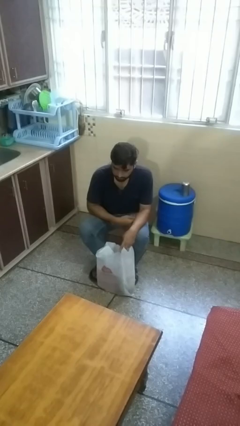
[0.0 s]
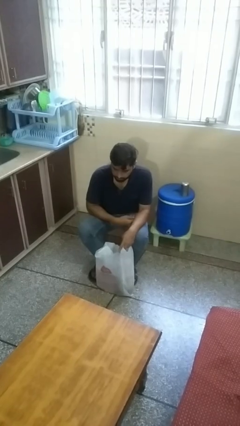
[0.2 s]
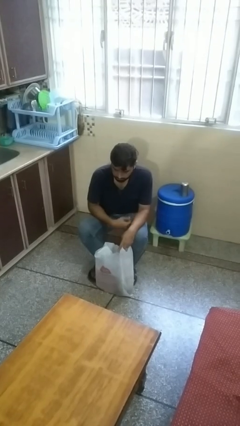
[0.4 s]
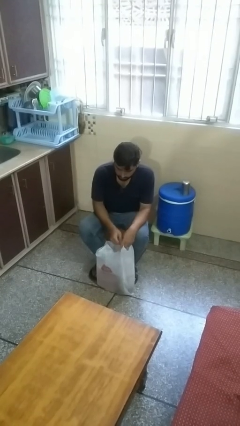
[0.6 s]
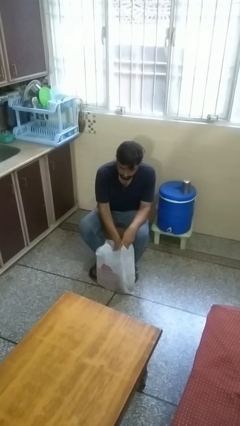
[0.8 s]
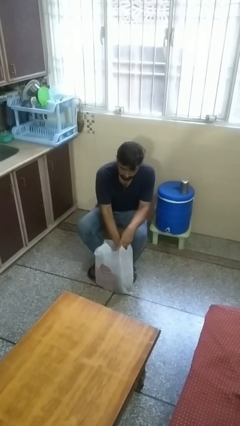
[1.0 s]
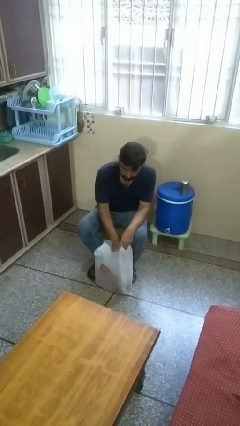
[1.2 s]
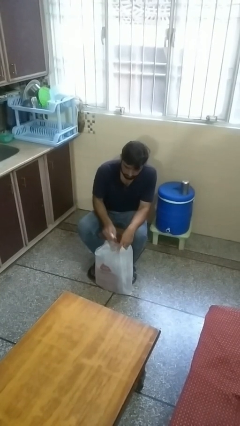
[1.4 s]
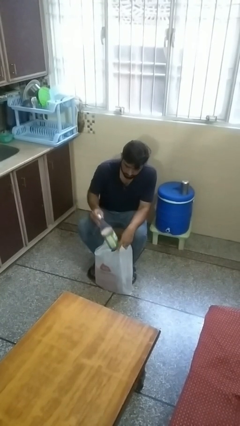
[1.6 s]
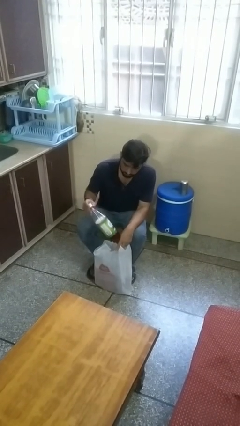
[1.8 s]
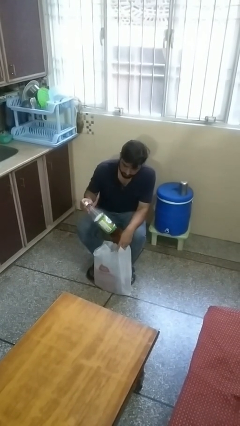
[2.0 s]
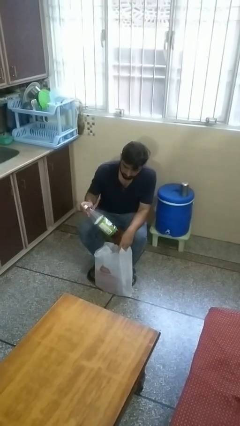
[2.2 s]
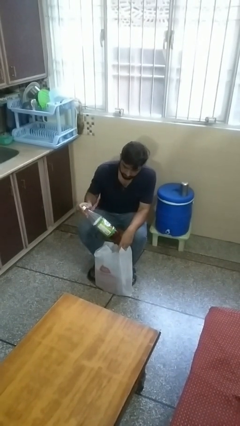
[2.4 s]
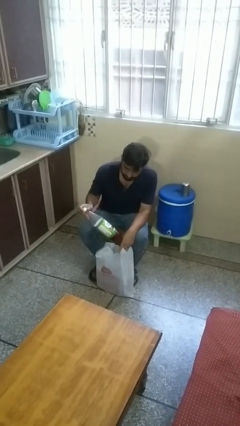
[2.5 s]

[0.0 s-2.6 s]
person takes object from bag

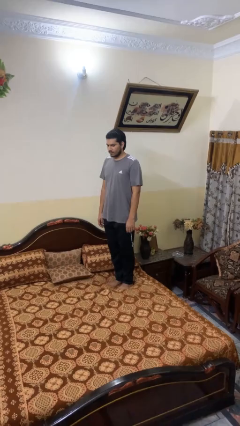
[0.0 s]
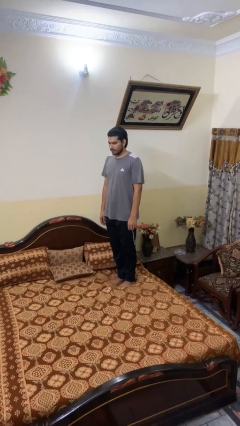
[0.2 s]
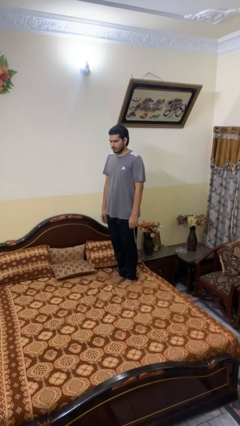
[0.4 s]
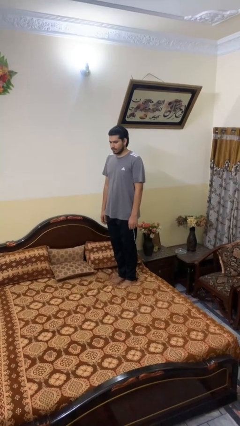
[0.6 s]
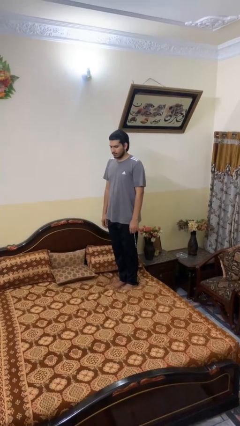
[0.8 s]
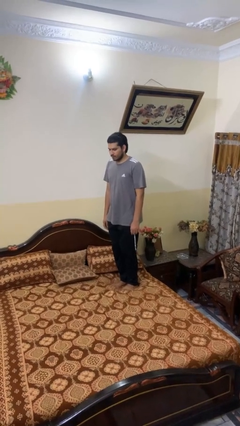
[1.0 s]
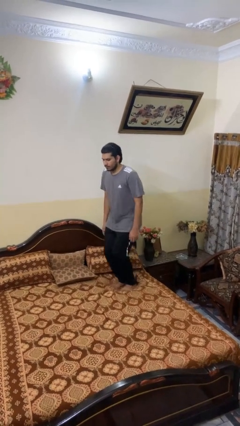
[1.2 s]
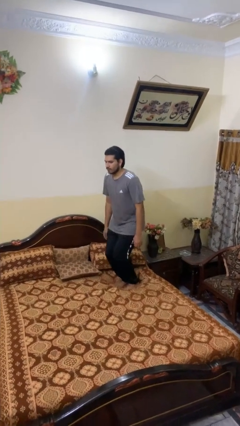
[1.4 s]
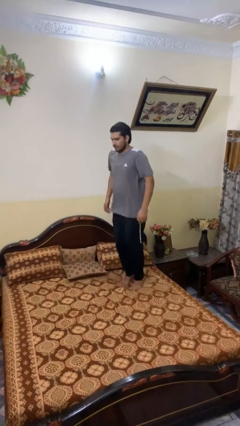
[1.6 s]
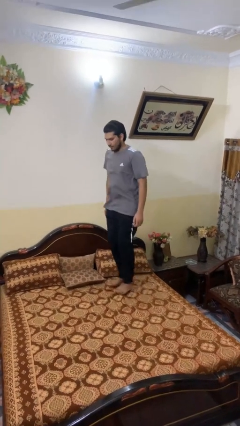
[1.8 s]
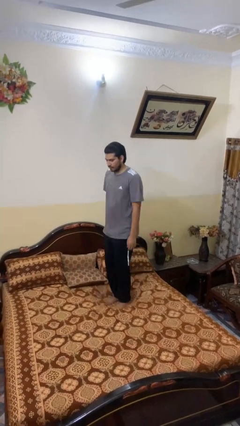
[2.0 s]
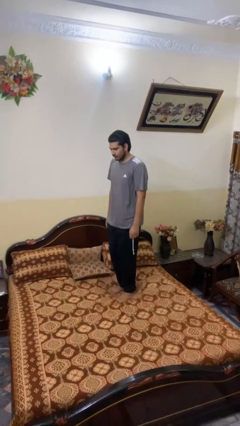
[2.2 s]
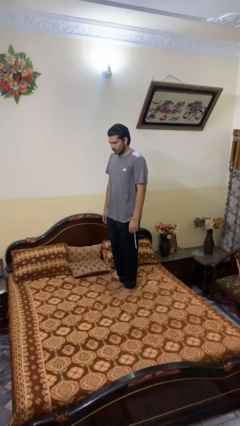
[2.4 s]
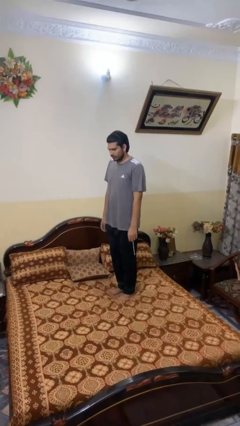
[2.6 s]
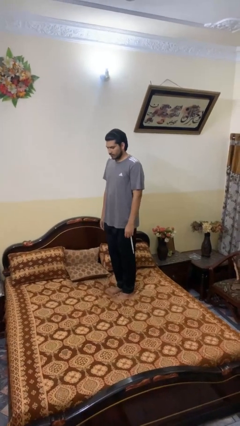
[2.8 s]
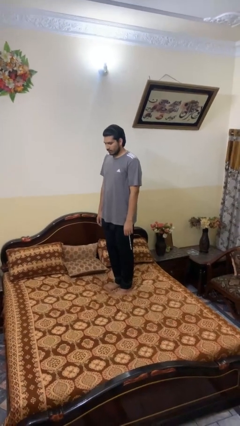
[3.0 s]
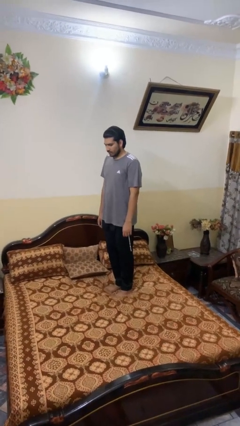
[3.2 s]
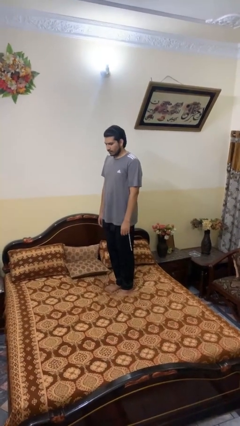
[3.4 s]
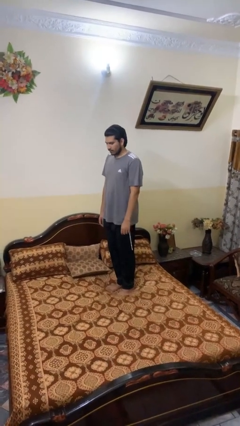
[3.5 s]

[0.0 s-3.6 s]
person jumps on bed

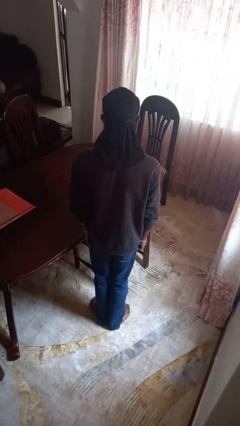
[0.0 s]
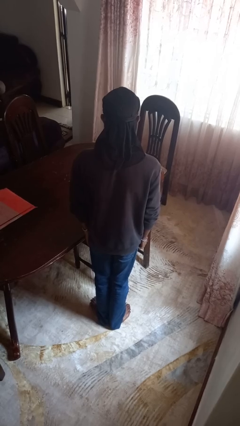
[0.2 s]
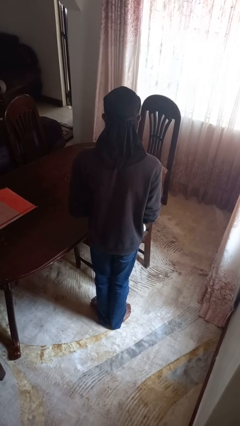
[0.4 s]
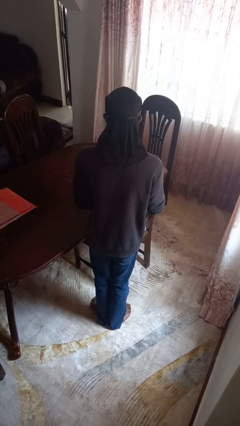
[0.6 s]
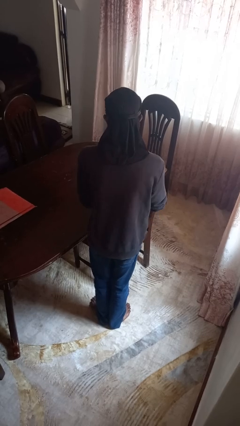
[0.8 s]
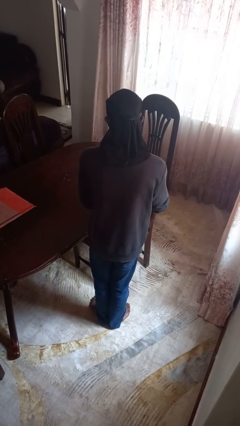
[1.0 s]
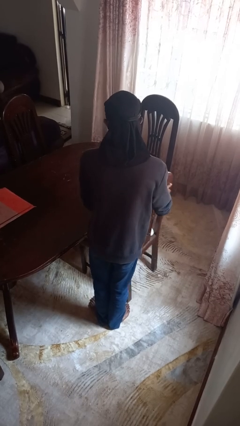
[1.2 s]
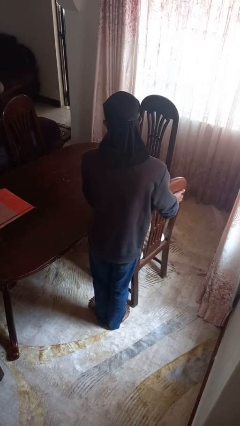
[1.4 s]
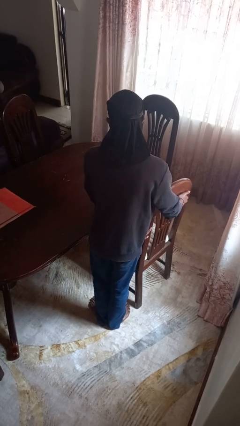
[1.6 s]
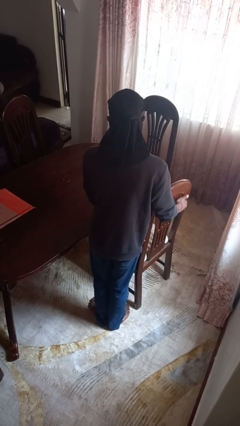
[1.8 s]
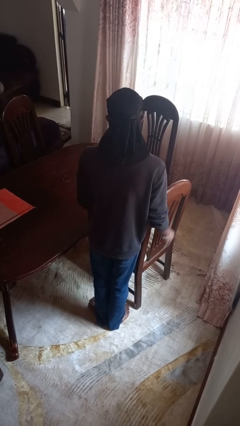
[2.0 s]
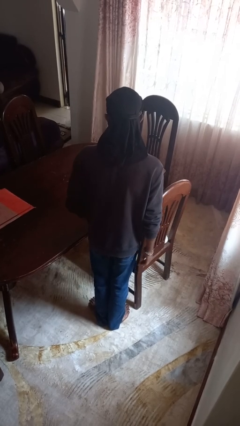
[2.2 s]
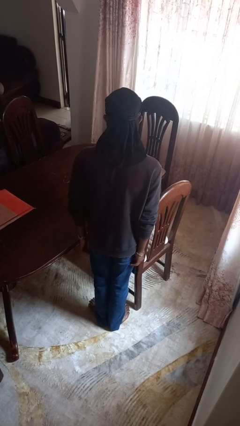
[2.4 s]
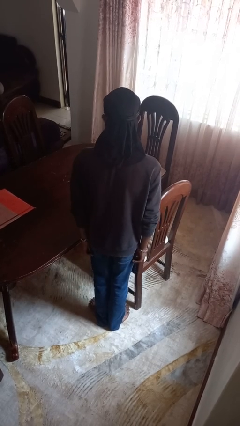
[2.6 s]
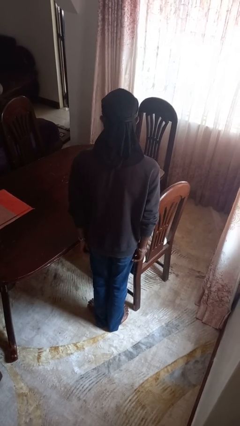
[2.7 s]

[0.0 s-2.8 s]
person pulls out chair

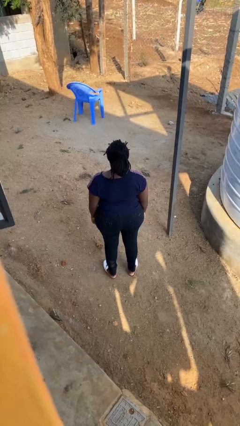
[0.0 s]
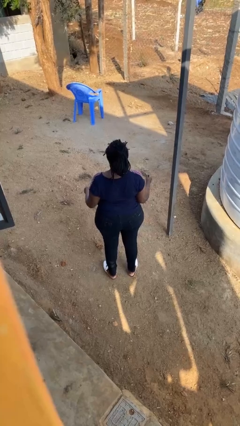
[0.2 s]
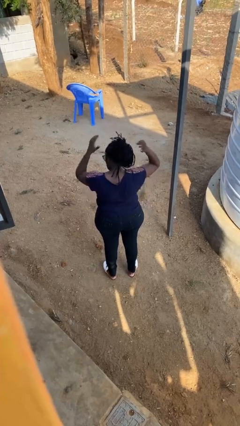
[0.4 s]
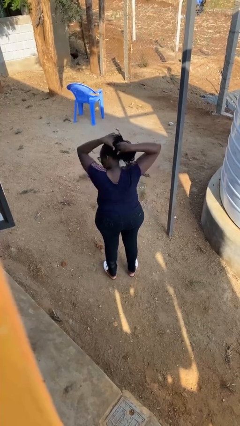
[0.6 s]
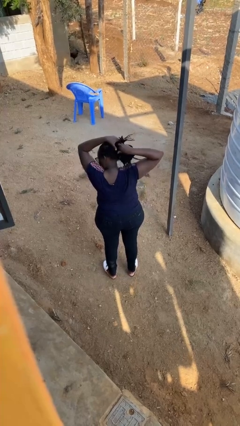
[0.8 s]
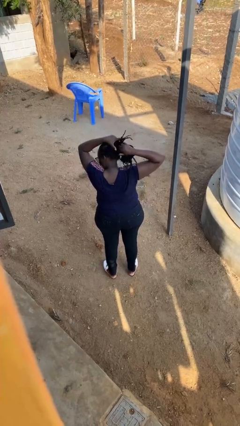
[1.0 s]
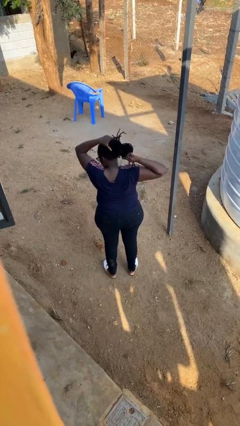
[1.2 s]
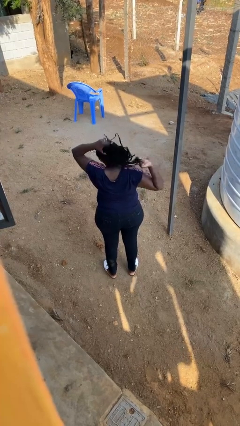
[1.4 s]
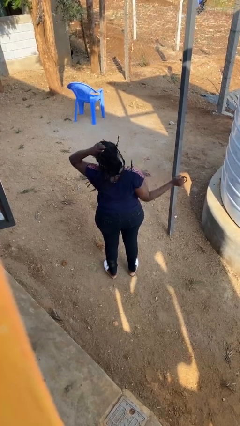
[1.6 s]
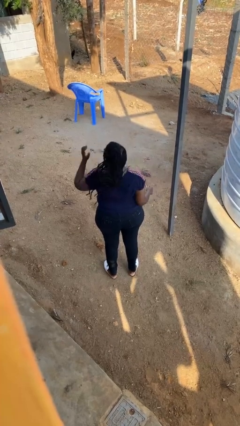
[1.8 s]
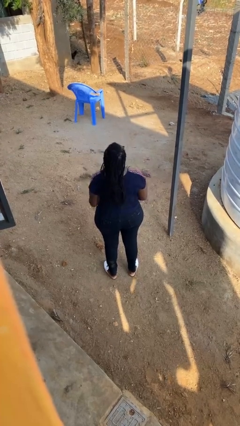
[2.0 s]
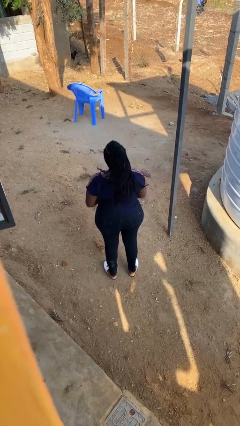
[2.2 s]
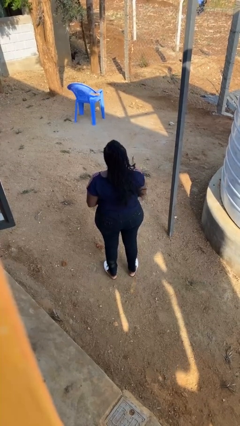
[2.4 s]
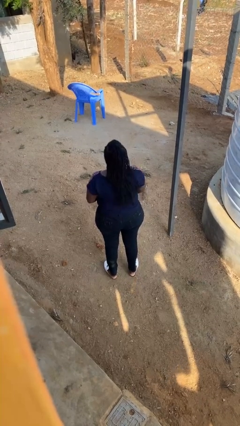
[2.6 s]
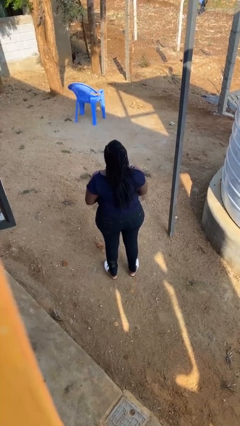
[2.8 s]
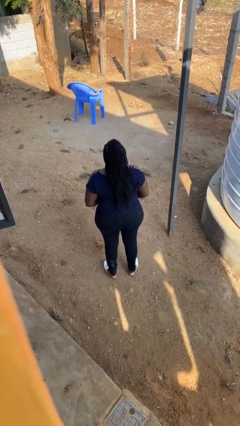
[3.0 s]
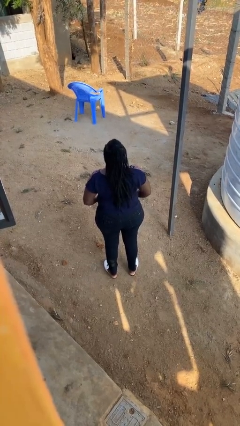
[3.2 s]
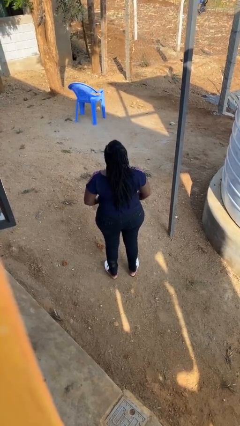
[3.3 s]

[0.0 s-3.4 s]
person takes off hairtie

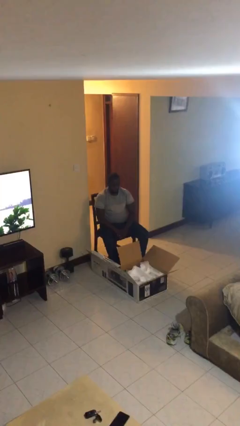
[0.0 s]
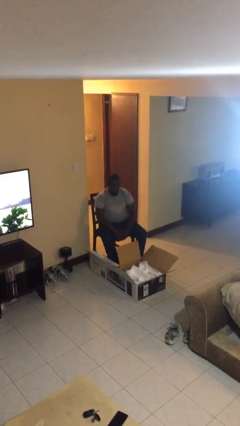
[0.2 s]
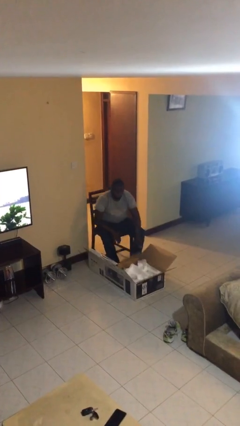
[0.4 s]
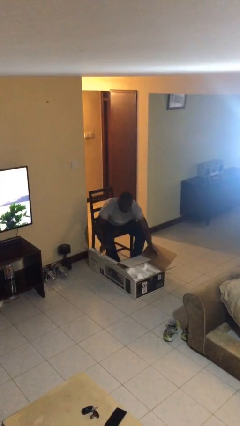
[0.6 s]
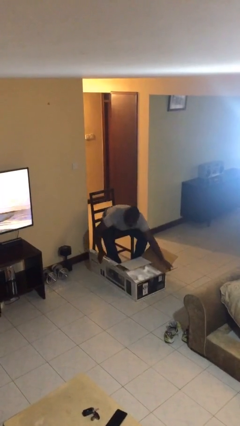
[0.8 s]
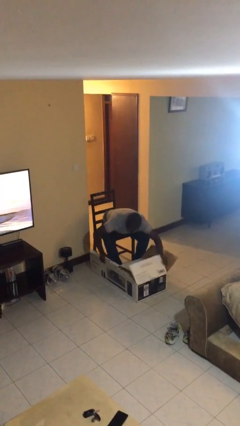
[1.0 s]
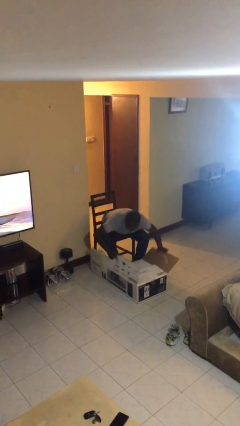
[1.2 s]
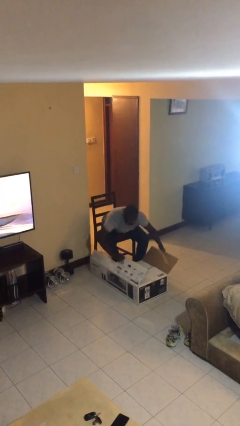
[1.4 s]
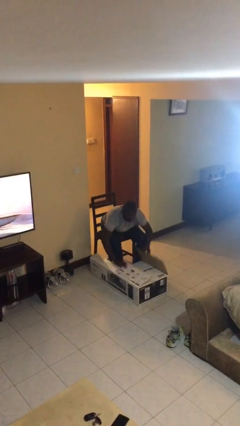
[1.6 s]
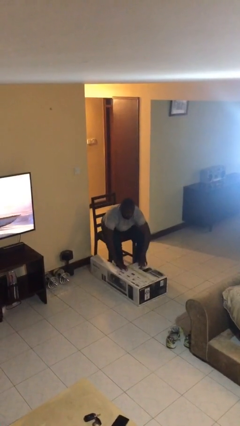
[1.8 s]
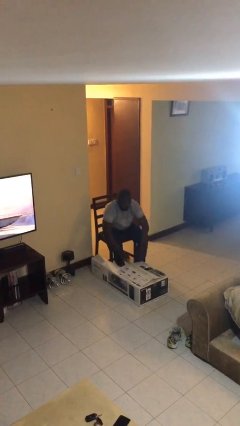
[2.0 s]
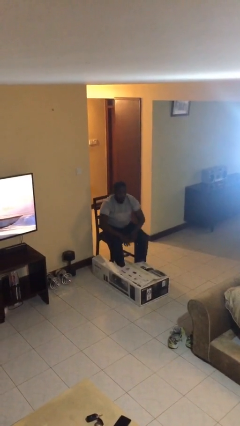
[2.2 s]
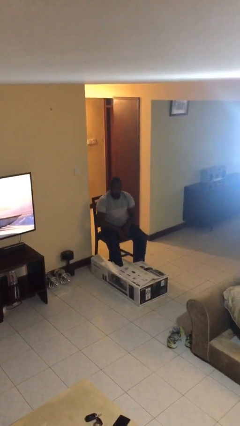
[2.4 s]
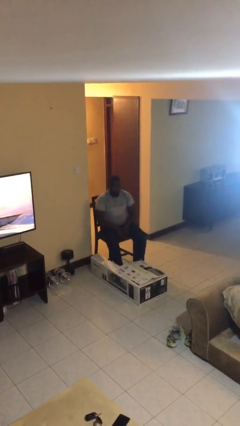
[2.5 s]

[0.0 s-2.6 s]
person closes box

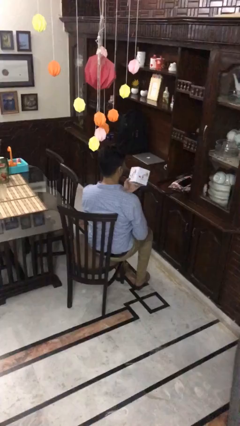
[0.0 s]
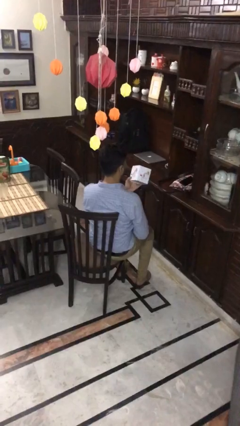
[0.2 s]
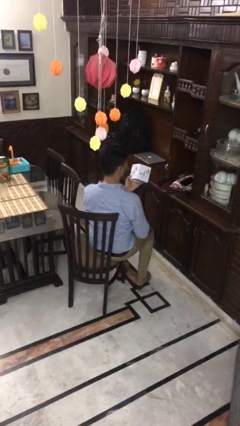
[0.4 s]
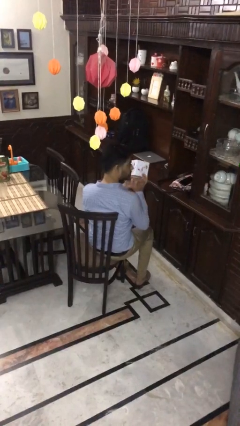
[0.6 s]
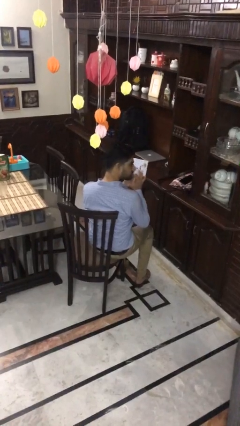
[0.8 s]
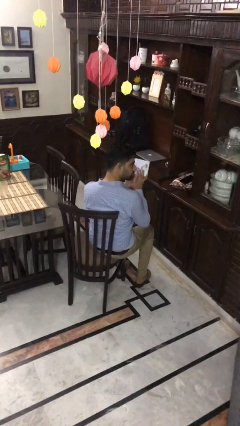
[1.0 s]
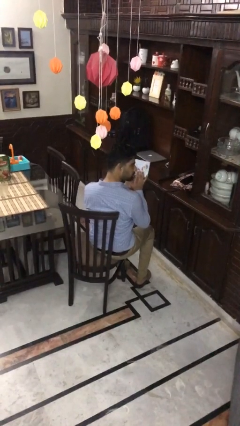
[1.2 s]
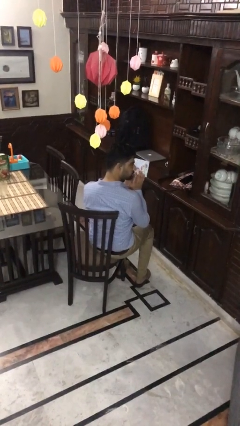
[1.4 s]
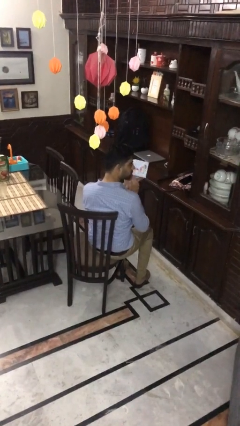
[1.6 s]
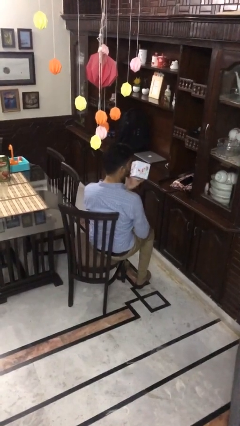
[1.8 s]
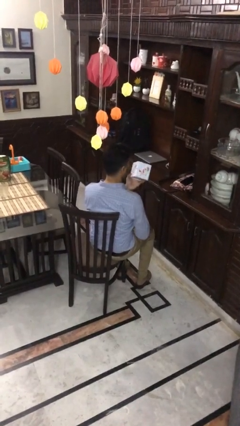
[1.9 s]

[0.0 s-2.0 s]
person taps object with finger

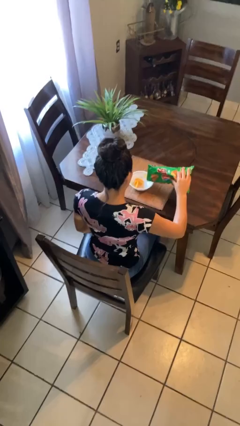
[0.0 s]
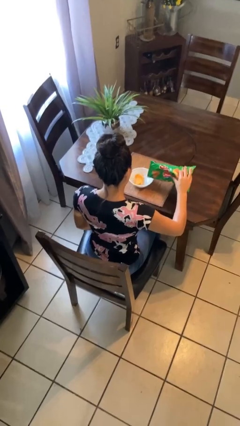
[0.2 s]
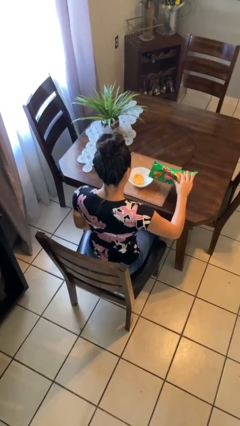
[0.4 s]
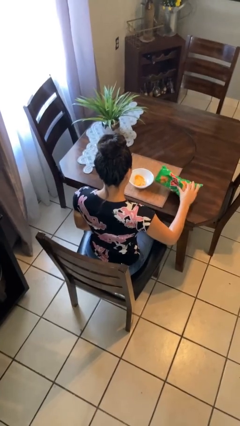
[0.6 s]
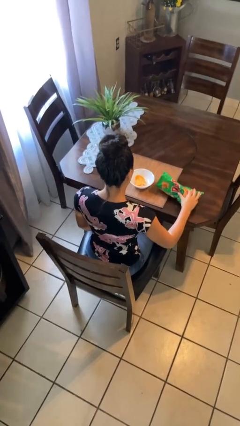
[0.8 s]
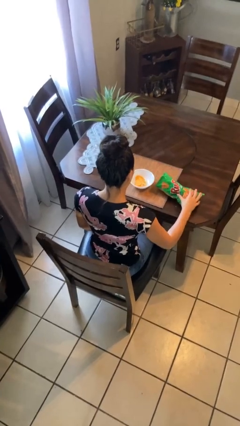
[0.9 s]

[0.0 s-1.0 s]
person pours into bowl
